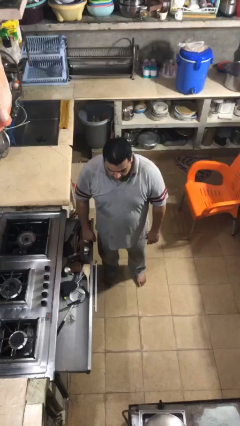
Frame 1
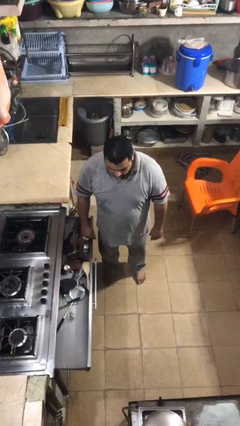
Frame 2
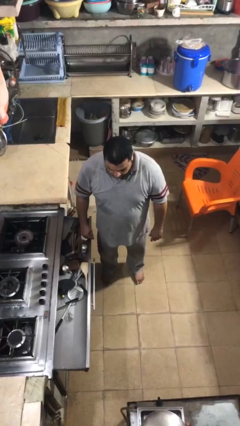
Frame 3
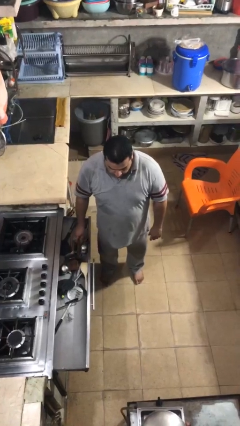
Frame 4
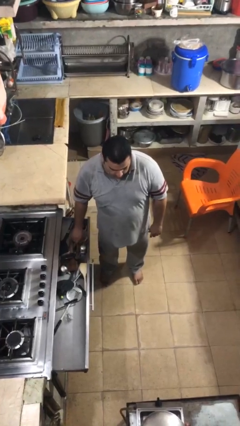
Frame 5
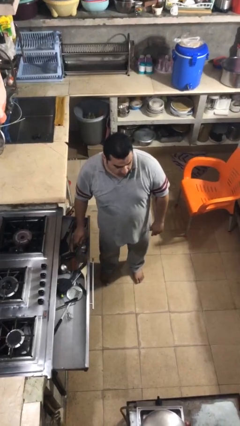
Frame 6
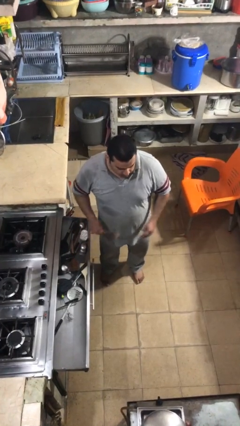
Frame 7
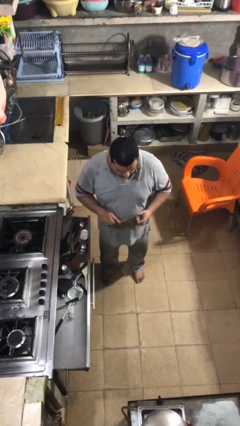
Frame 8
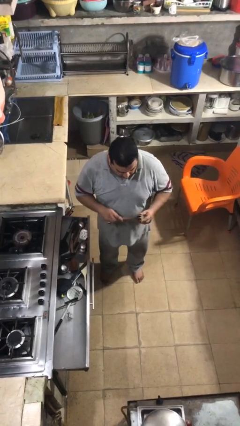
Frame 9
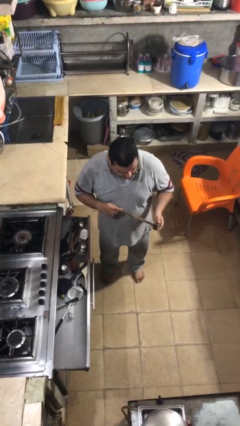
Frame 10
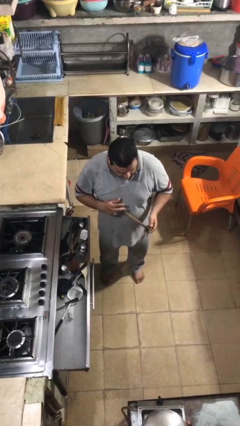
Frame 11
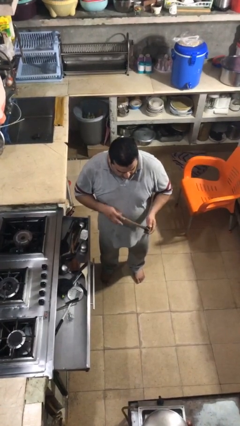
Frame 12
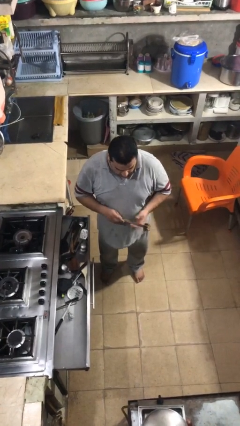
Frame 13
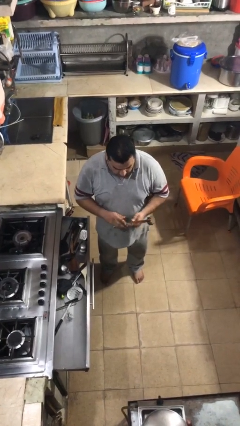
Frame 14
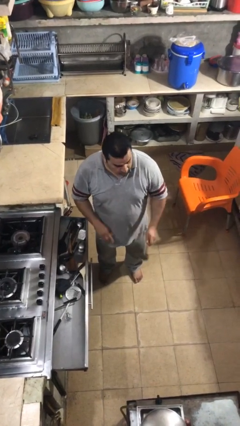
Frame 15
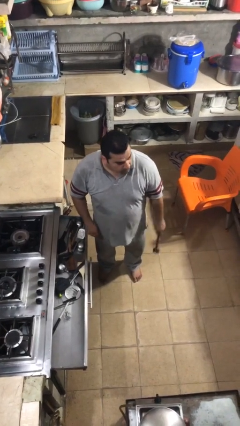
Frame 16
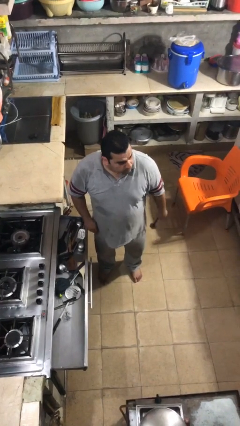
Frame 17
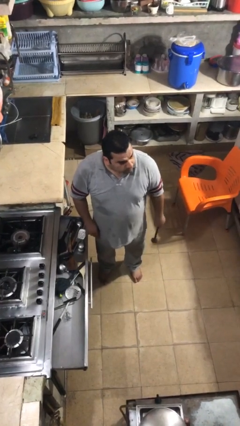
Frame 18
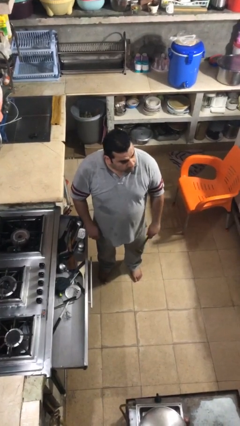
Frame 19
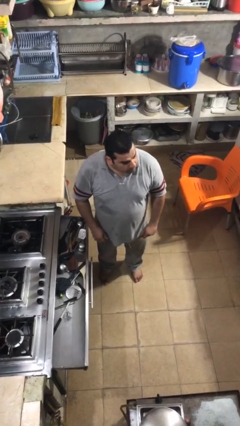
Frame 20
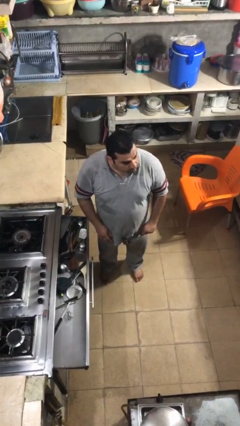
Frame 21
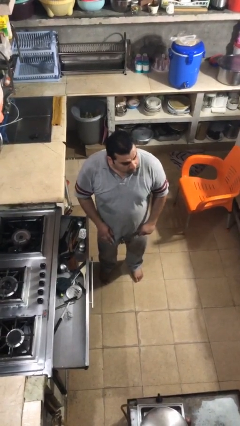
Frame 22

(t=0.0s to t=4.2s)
person takes object from kitchen drawer

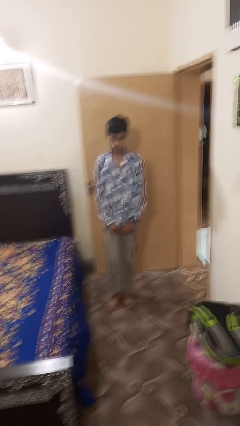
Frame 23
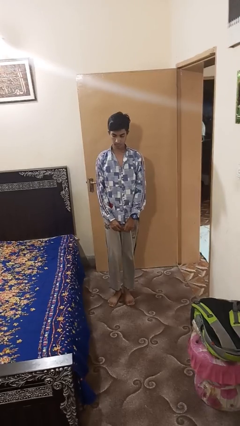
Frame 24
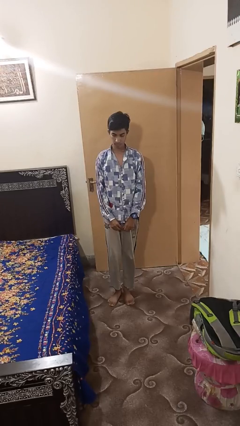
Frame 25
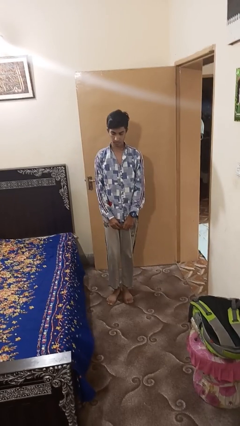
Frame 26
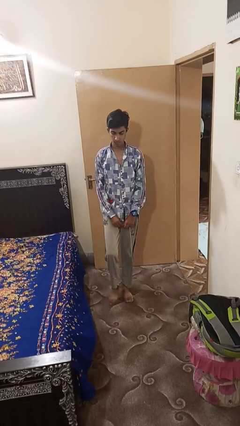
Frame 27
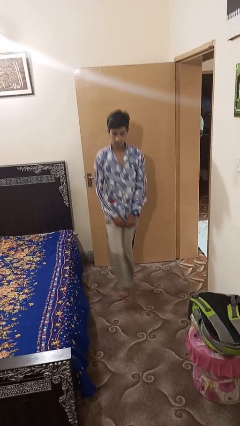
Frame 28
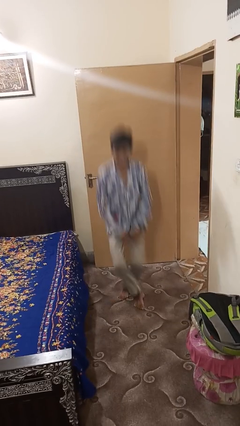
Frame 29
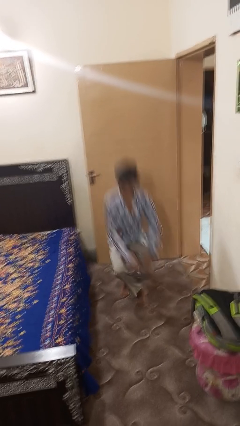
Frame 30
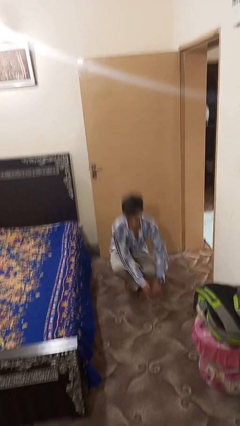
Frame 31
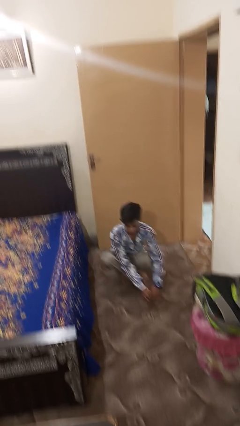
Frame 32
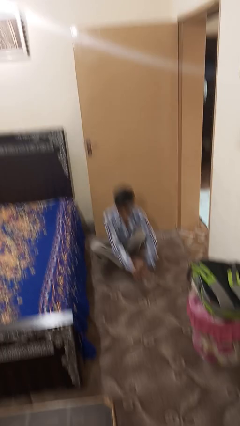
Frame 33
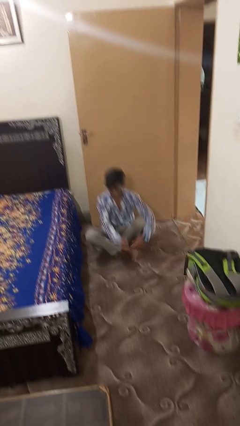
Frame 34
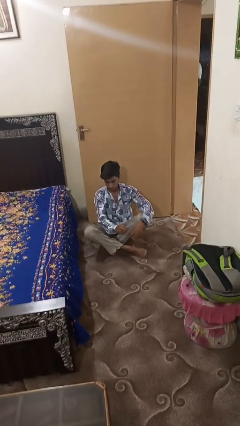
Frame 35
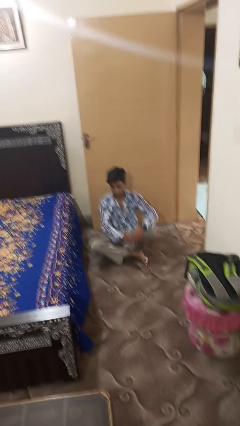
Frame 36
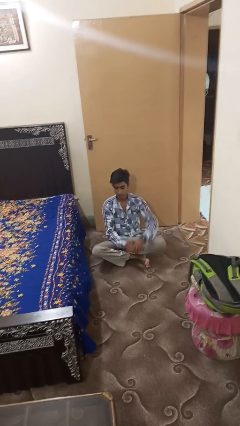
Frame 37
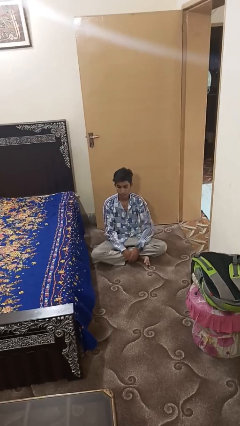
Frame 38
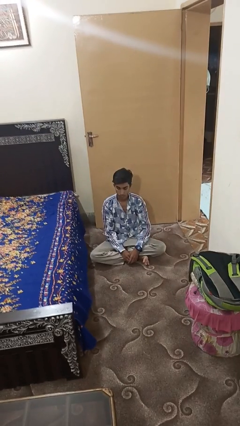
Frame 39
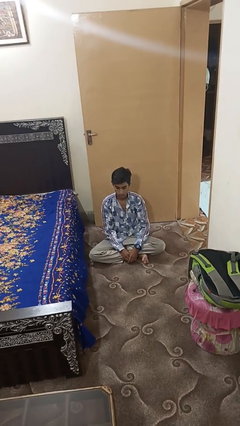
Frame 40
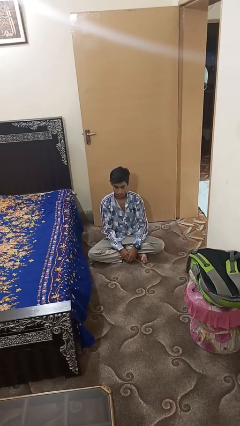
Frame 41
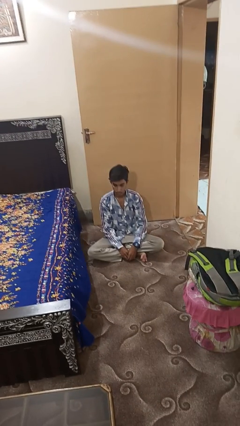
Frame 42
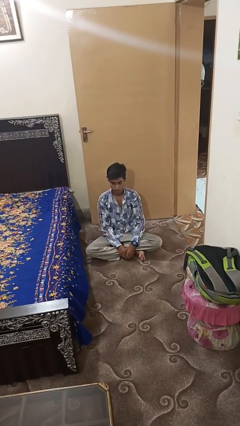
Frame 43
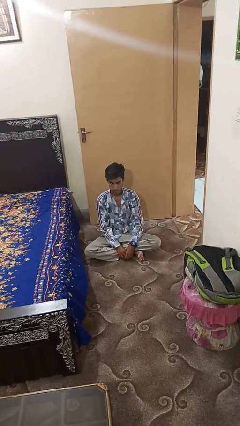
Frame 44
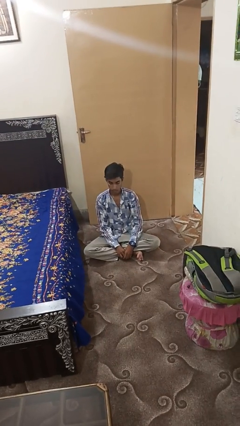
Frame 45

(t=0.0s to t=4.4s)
person sits crisscross

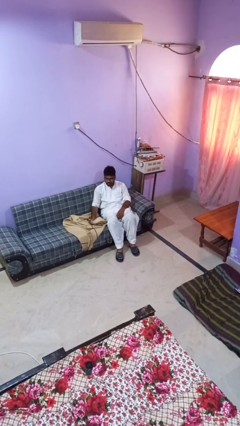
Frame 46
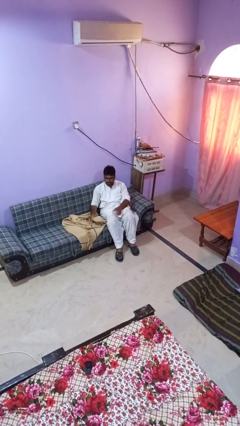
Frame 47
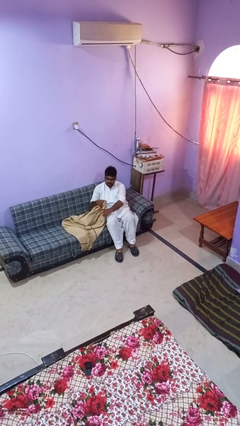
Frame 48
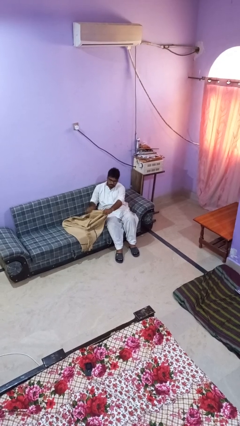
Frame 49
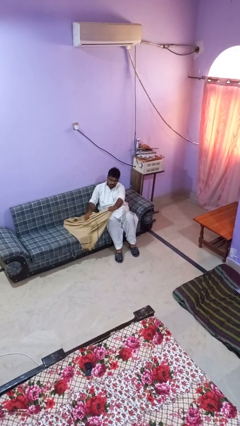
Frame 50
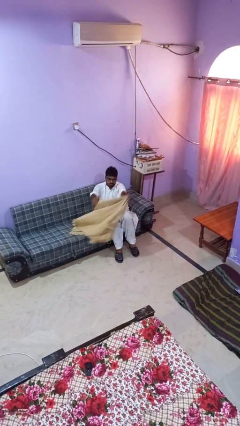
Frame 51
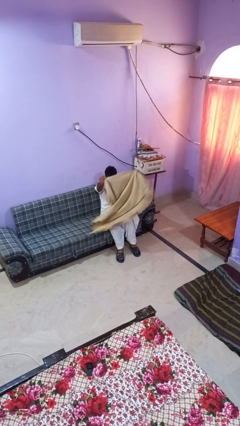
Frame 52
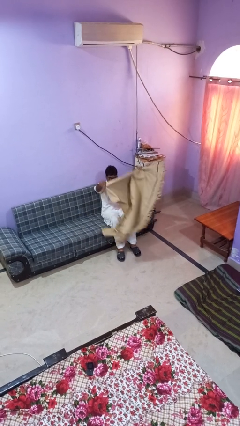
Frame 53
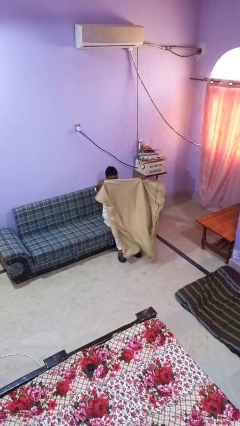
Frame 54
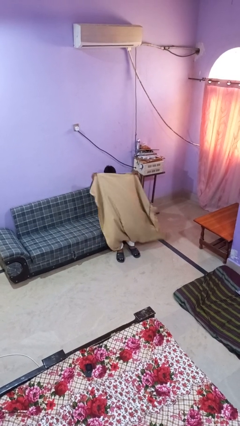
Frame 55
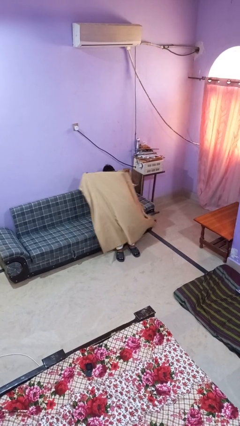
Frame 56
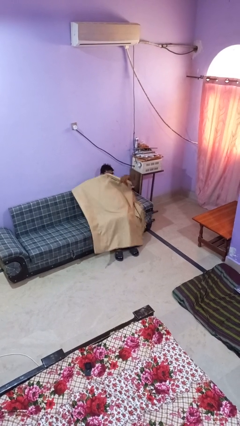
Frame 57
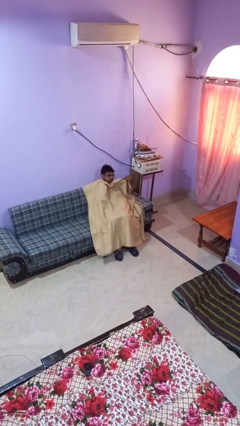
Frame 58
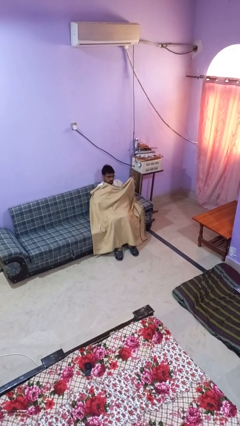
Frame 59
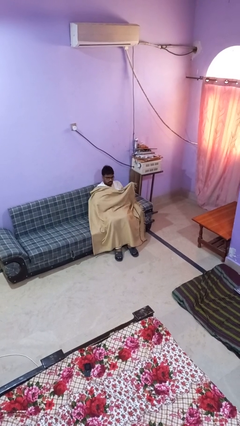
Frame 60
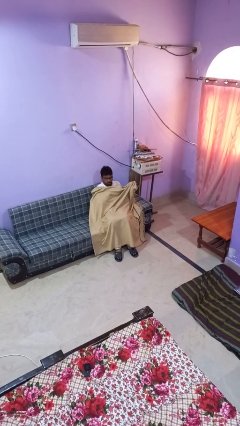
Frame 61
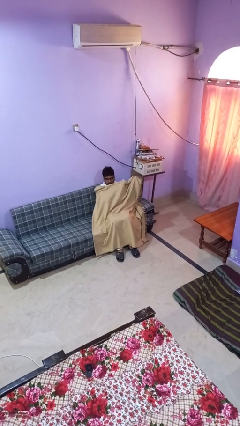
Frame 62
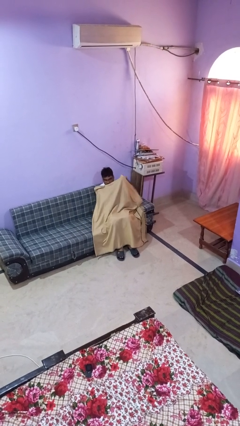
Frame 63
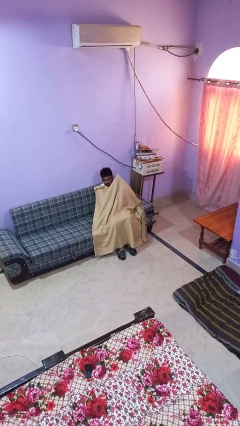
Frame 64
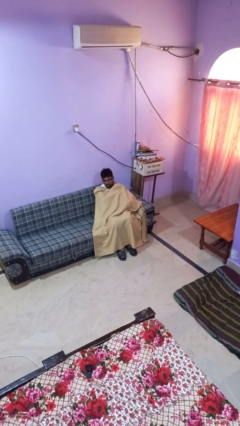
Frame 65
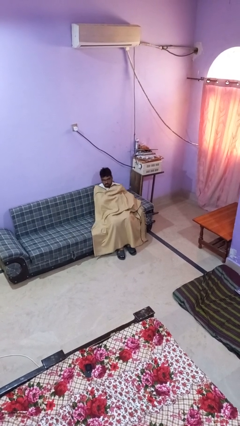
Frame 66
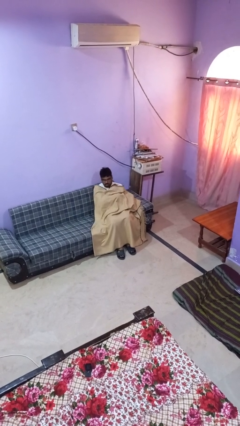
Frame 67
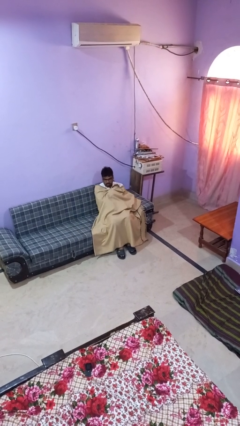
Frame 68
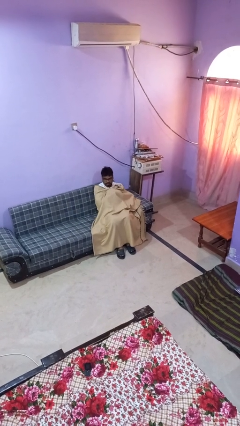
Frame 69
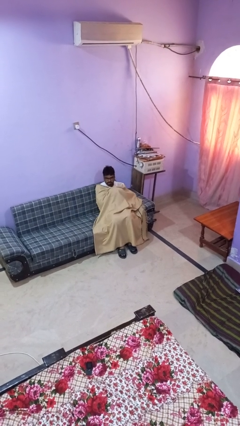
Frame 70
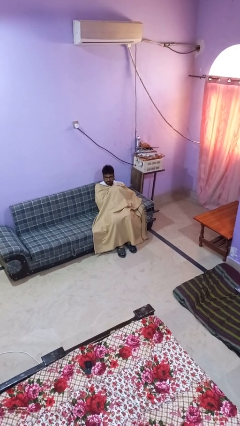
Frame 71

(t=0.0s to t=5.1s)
person covers with blanket

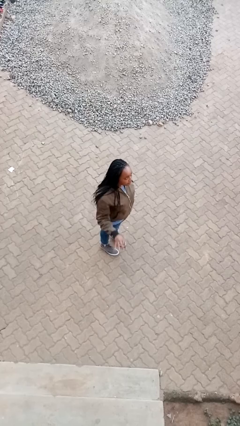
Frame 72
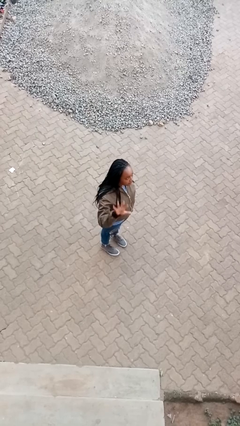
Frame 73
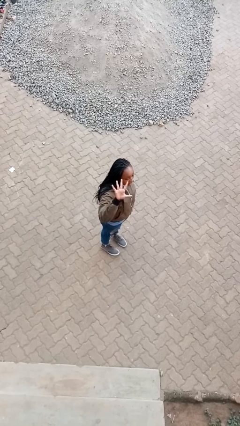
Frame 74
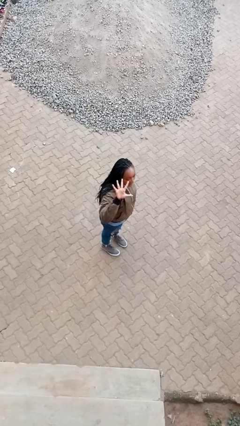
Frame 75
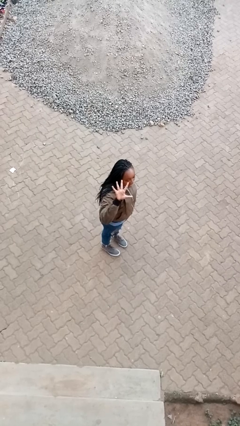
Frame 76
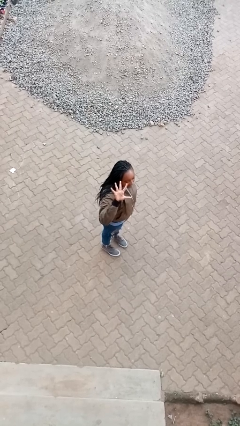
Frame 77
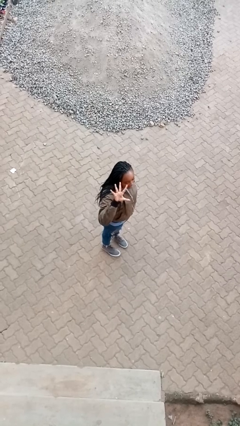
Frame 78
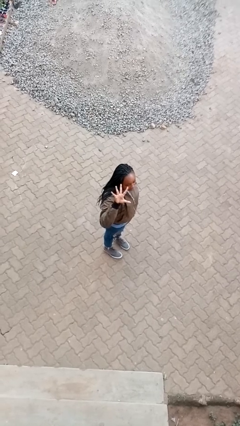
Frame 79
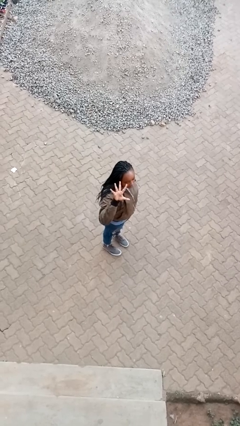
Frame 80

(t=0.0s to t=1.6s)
person gestures number five

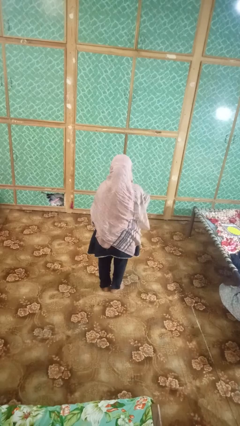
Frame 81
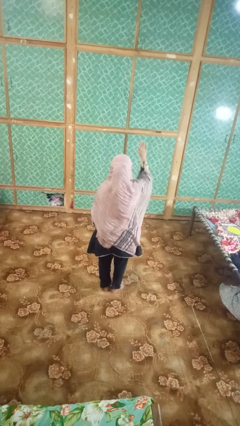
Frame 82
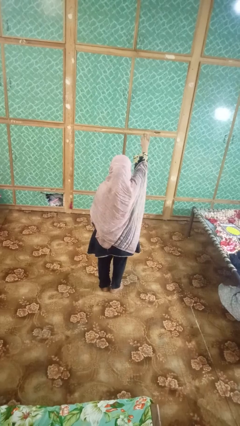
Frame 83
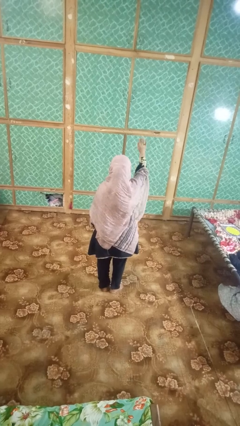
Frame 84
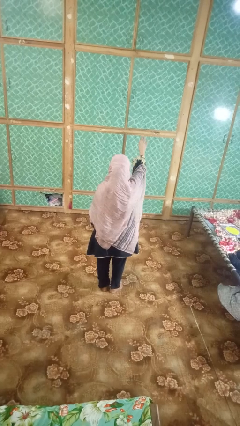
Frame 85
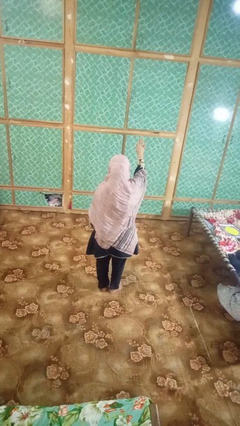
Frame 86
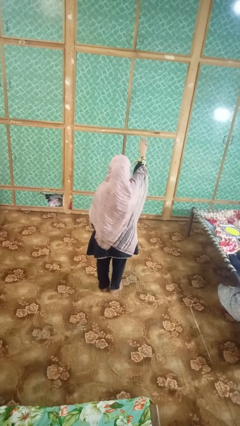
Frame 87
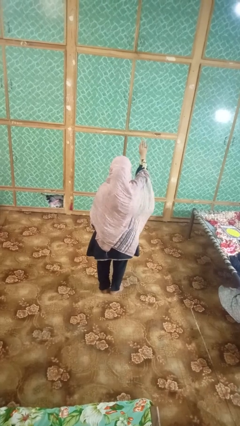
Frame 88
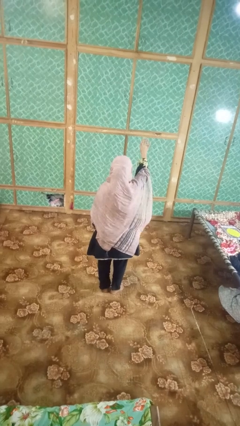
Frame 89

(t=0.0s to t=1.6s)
person gestures stop

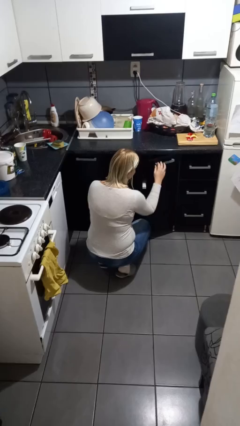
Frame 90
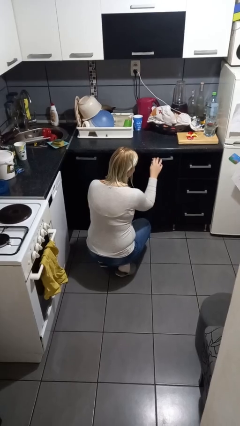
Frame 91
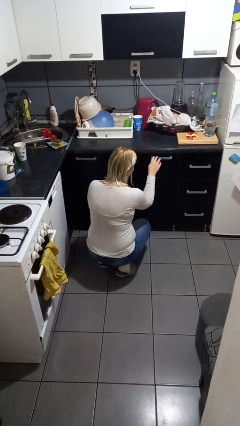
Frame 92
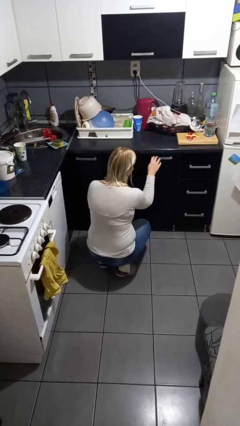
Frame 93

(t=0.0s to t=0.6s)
person closes cabinet
